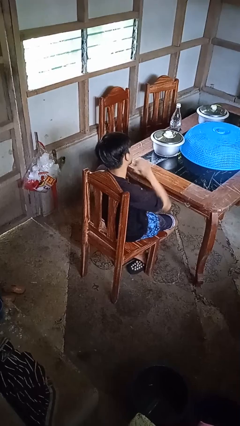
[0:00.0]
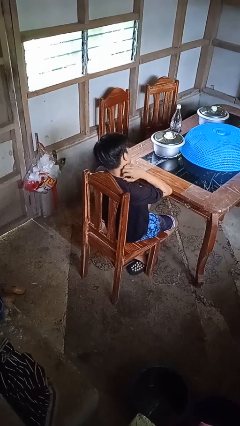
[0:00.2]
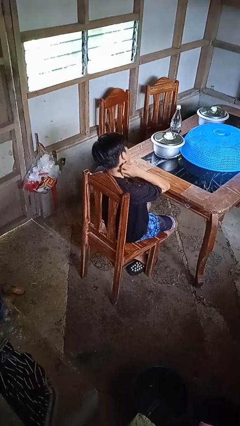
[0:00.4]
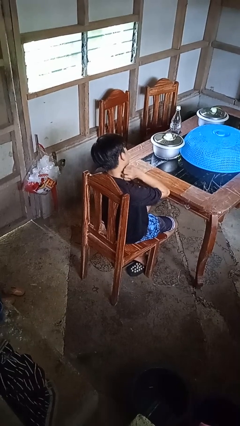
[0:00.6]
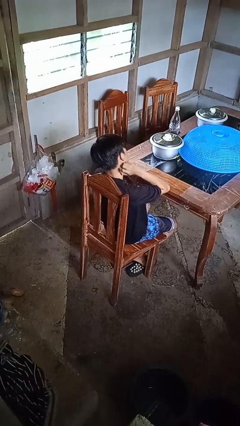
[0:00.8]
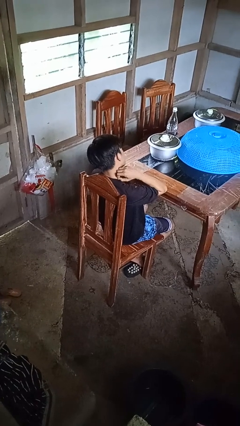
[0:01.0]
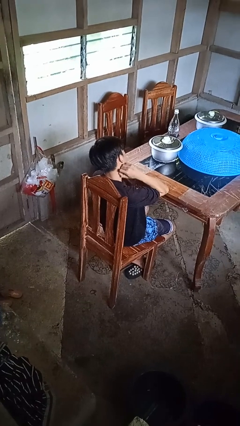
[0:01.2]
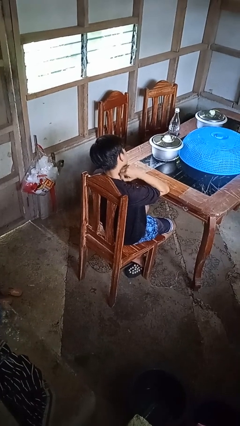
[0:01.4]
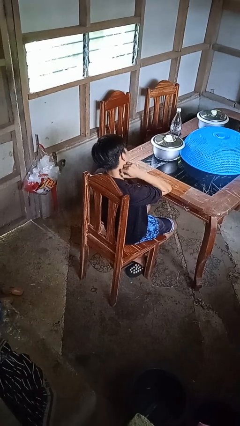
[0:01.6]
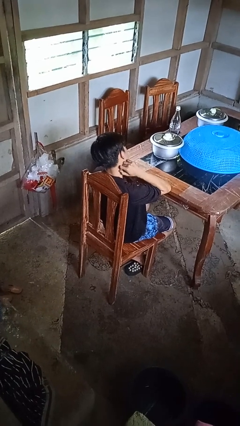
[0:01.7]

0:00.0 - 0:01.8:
person rubs neck

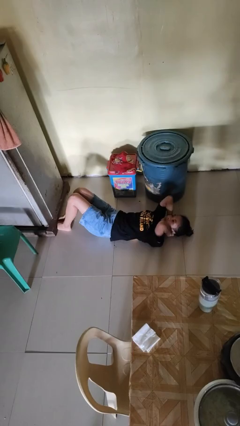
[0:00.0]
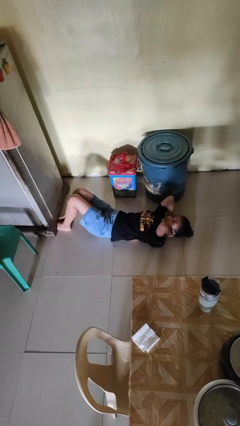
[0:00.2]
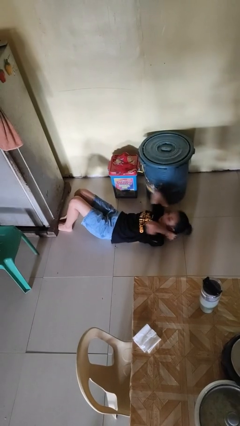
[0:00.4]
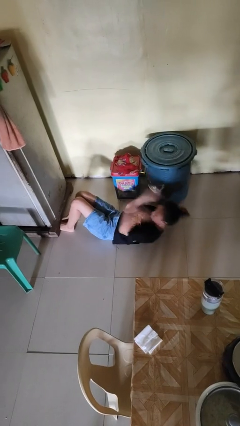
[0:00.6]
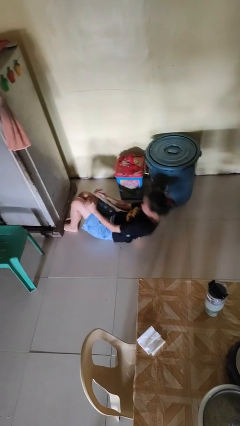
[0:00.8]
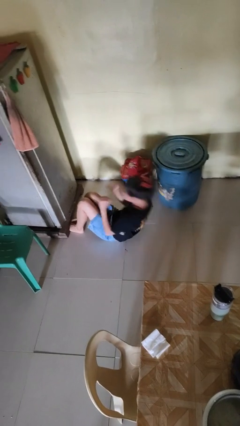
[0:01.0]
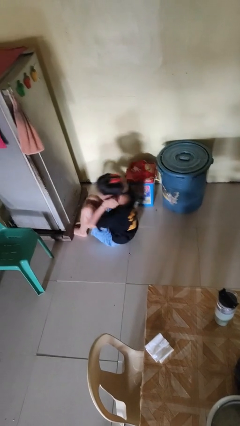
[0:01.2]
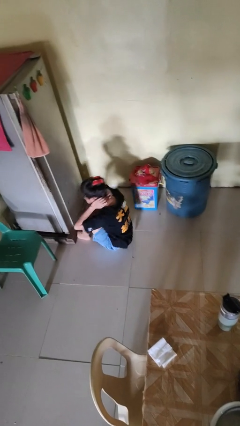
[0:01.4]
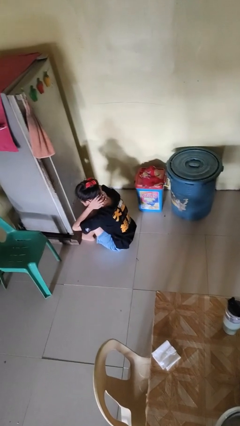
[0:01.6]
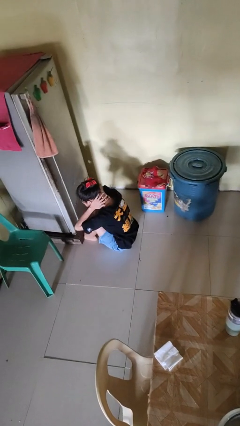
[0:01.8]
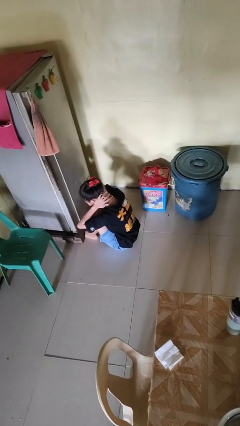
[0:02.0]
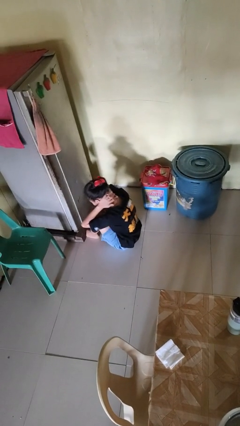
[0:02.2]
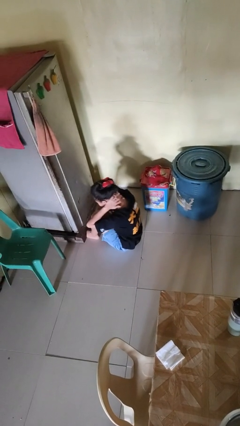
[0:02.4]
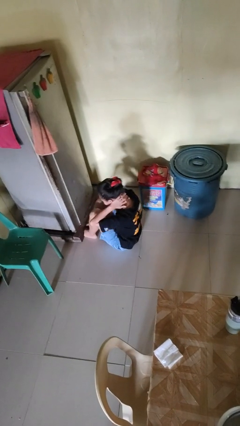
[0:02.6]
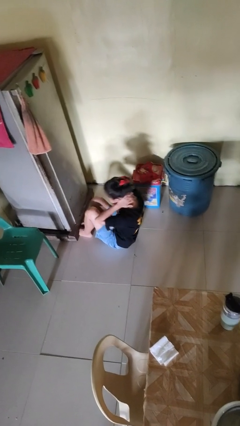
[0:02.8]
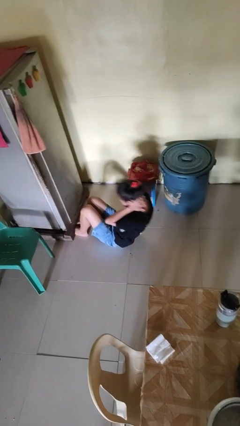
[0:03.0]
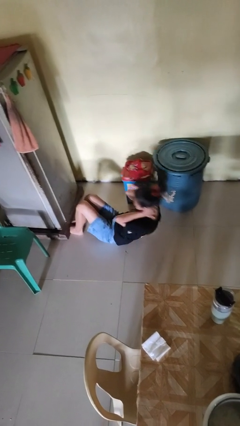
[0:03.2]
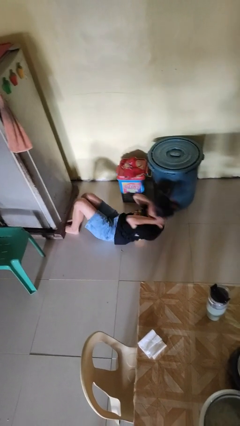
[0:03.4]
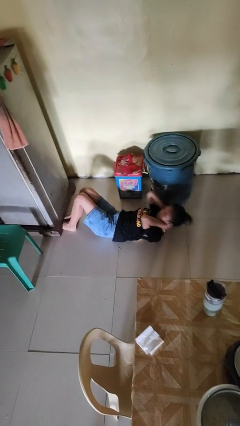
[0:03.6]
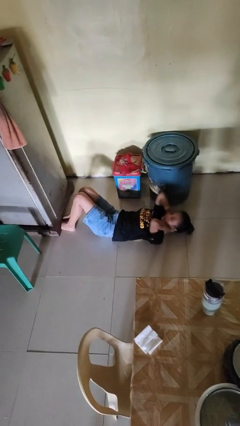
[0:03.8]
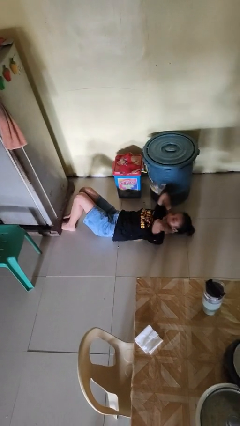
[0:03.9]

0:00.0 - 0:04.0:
person exercises with situp

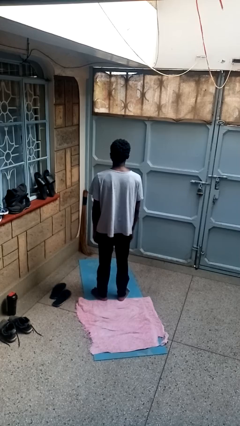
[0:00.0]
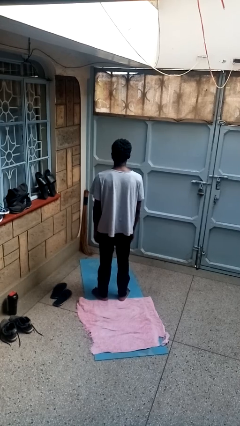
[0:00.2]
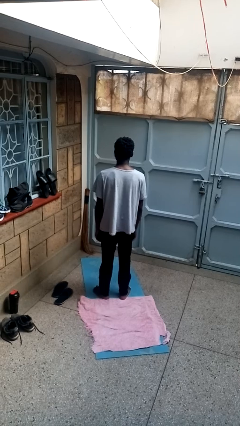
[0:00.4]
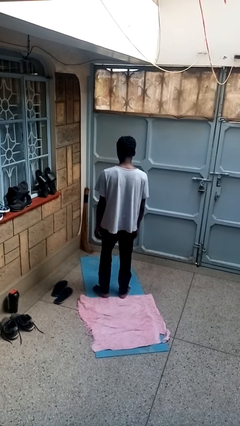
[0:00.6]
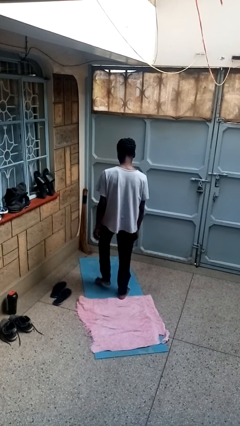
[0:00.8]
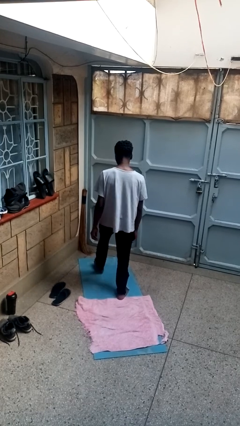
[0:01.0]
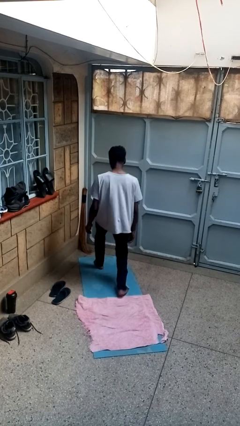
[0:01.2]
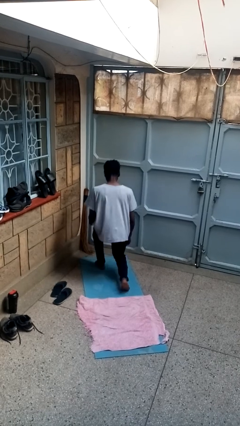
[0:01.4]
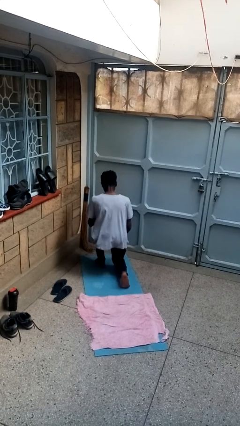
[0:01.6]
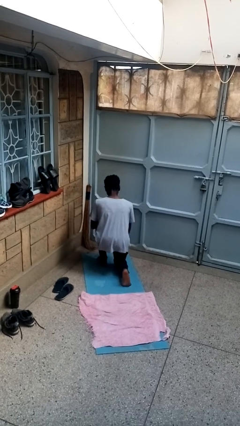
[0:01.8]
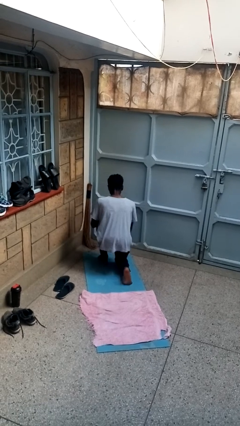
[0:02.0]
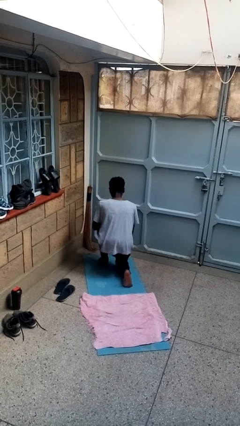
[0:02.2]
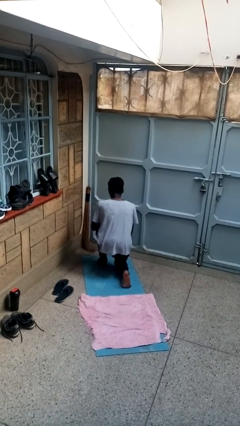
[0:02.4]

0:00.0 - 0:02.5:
person exercises with lunges

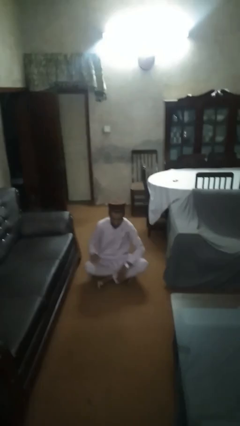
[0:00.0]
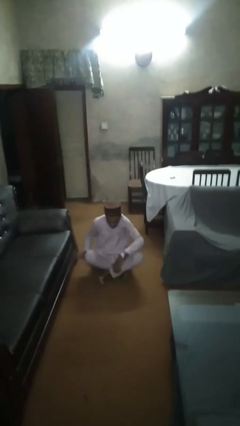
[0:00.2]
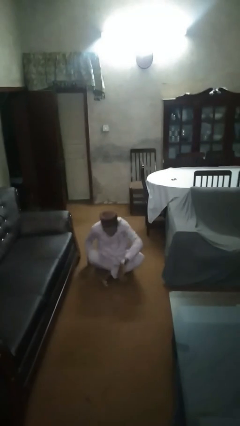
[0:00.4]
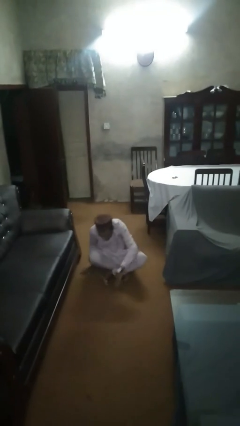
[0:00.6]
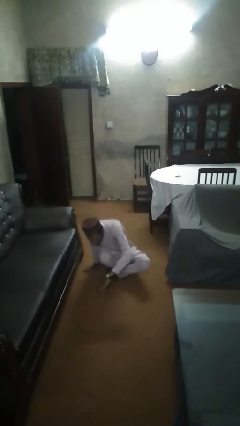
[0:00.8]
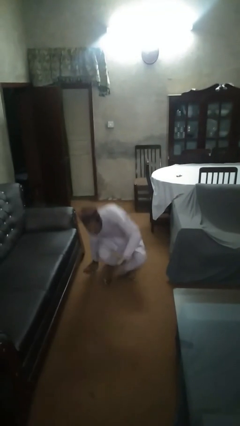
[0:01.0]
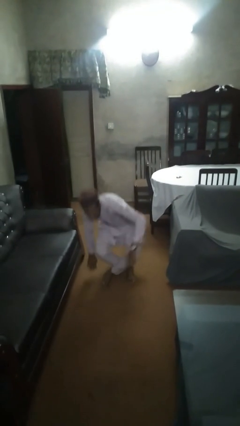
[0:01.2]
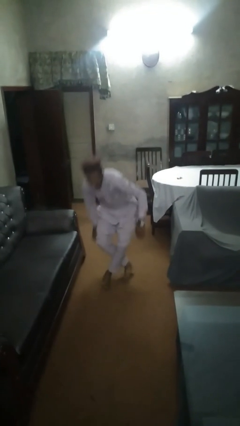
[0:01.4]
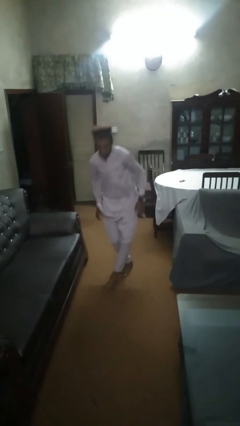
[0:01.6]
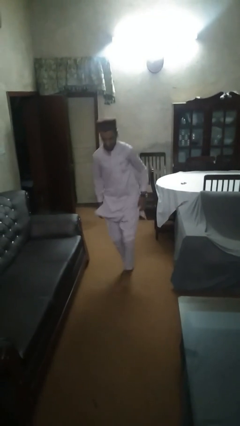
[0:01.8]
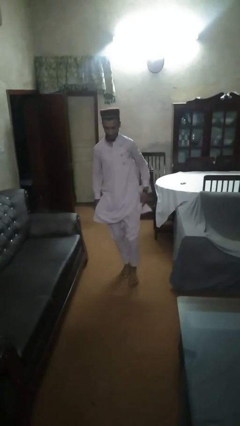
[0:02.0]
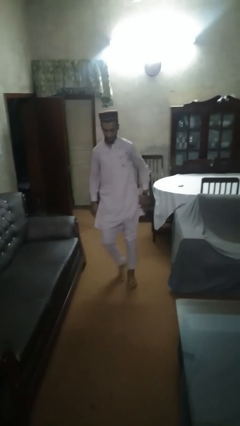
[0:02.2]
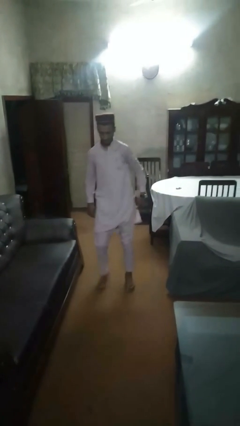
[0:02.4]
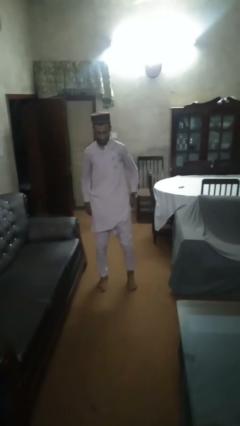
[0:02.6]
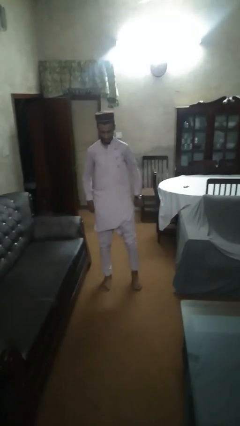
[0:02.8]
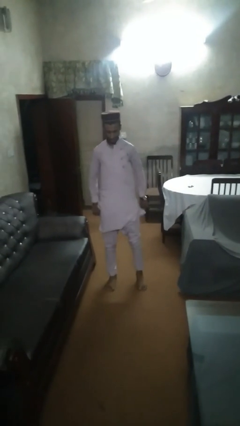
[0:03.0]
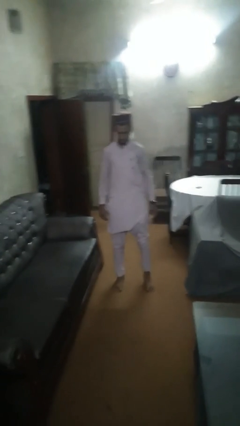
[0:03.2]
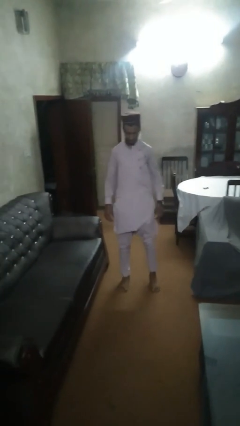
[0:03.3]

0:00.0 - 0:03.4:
person stands up from floor

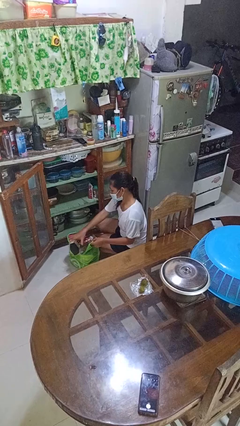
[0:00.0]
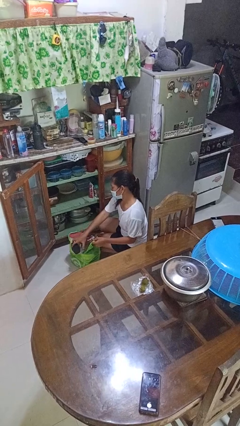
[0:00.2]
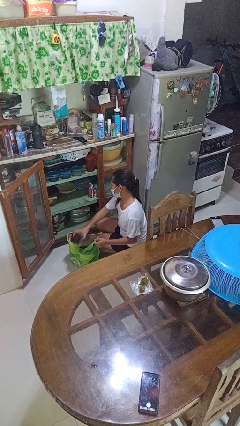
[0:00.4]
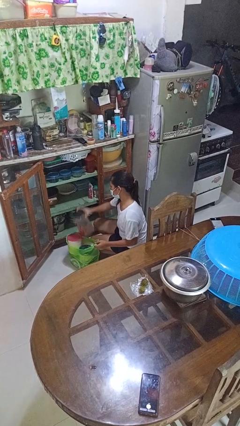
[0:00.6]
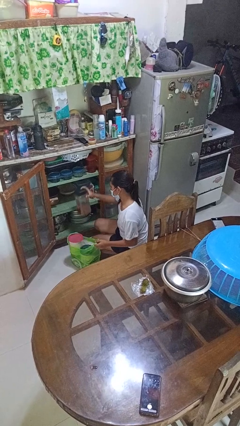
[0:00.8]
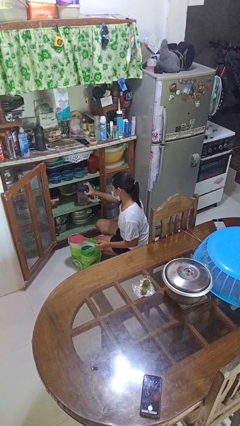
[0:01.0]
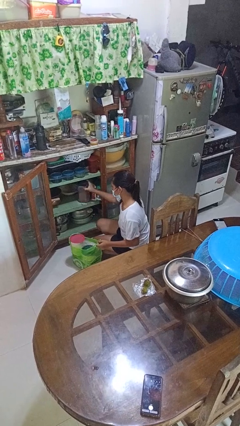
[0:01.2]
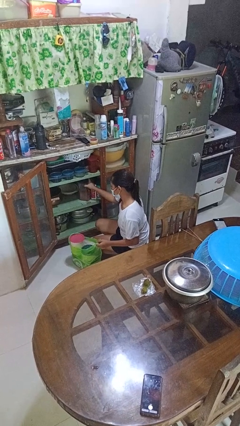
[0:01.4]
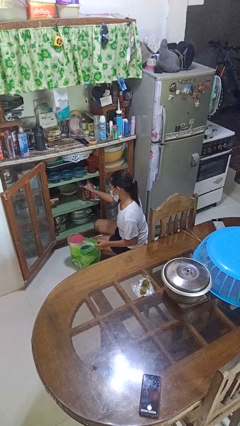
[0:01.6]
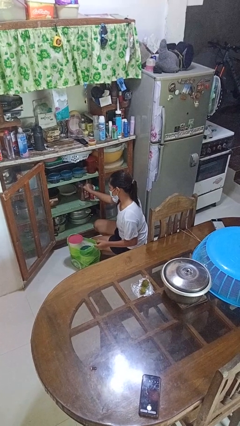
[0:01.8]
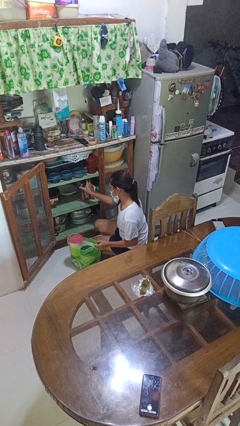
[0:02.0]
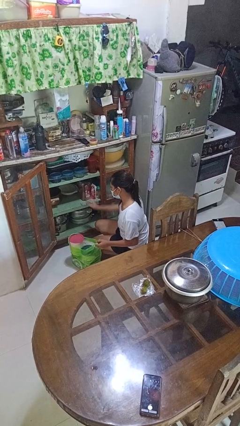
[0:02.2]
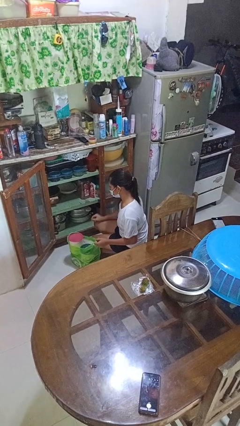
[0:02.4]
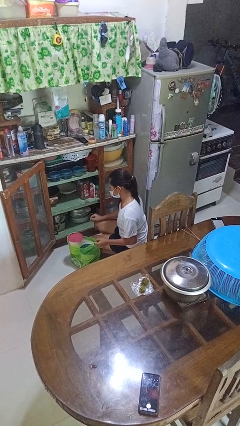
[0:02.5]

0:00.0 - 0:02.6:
person loads groceries into cabinet

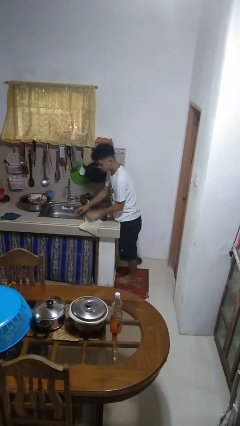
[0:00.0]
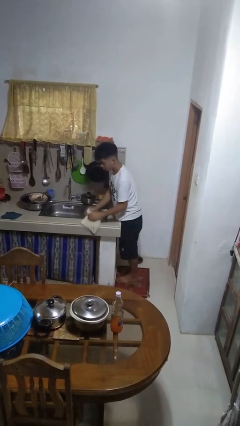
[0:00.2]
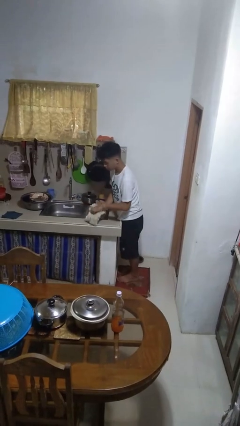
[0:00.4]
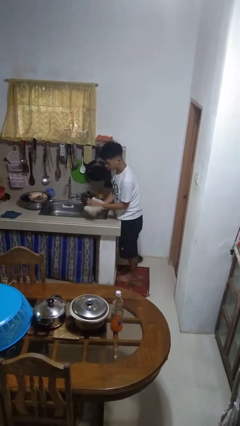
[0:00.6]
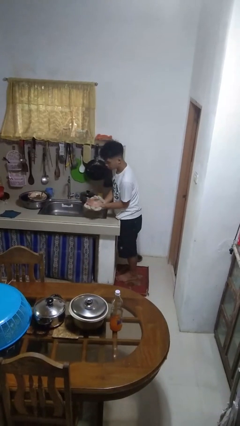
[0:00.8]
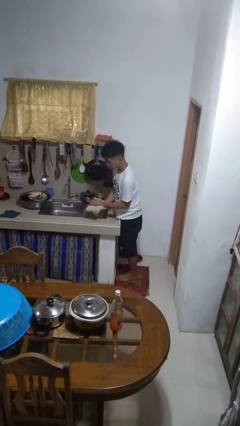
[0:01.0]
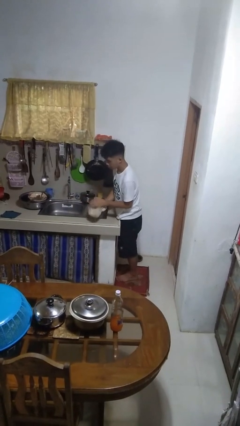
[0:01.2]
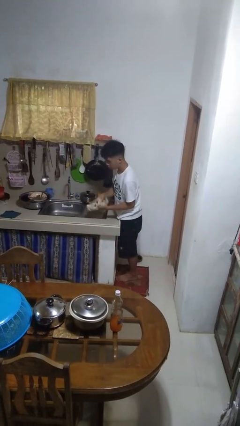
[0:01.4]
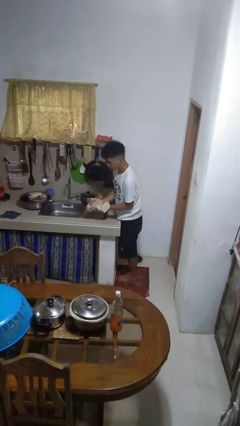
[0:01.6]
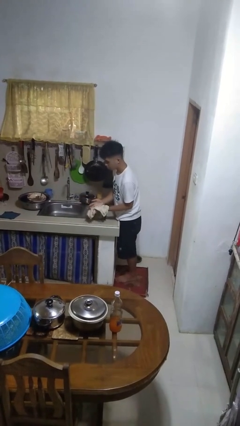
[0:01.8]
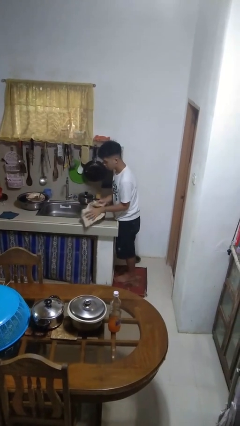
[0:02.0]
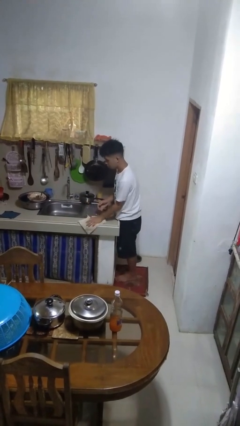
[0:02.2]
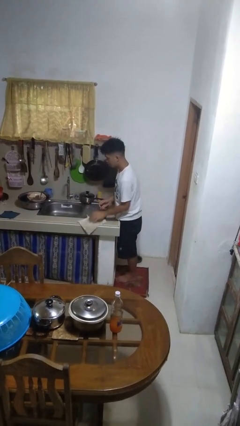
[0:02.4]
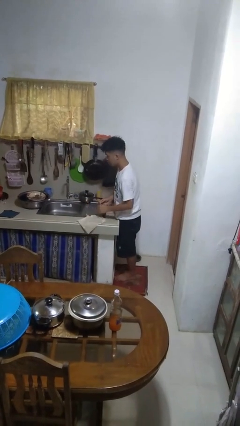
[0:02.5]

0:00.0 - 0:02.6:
person dries hands with towel

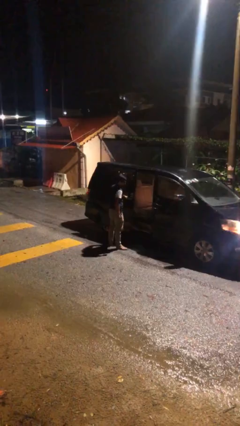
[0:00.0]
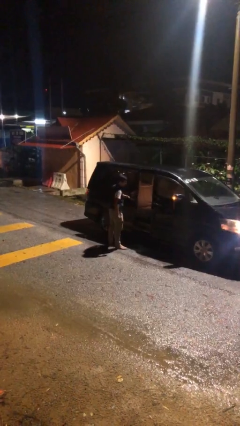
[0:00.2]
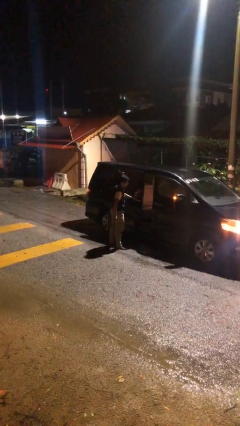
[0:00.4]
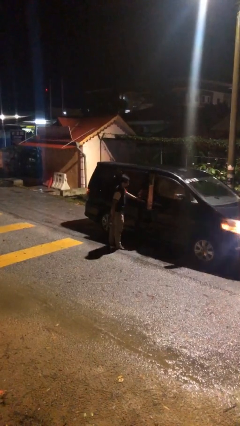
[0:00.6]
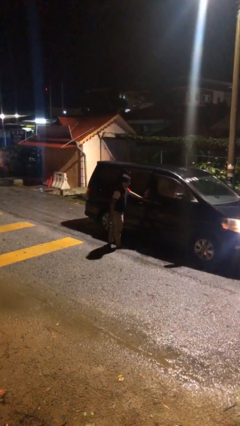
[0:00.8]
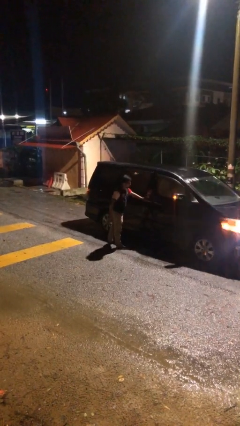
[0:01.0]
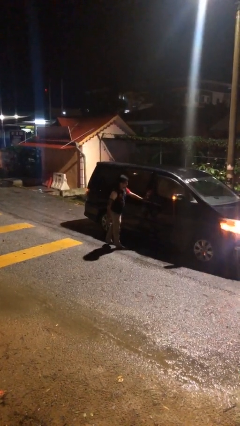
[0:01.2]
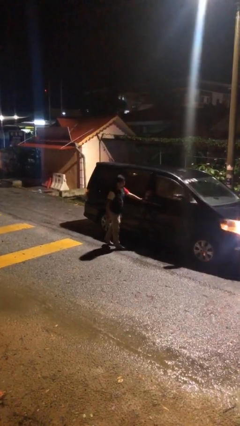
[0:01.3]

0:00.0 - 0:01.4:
person closes car door
